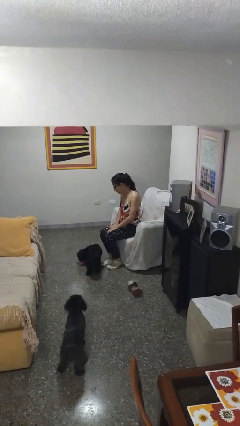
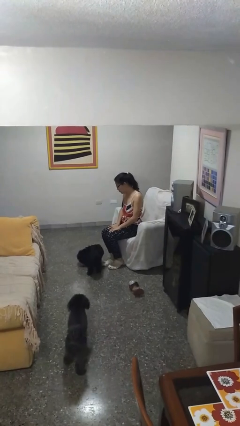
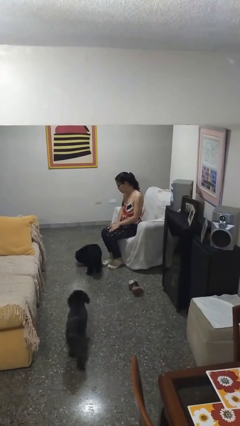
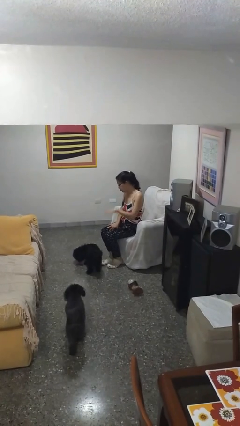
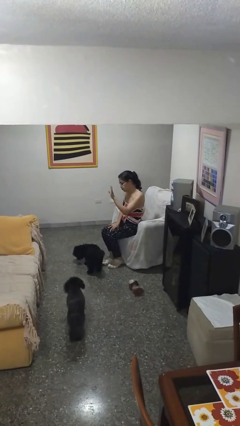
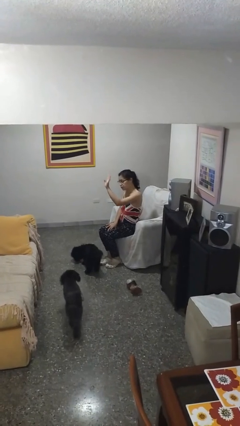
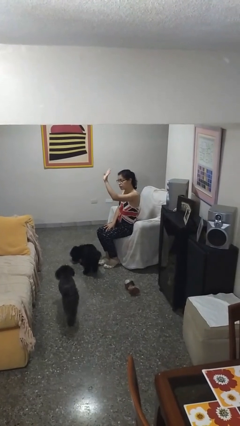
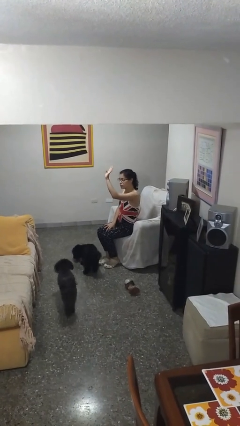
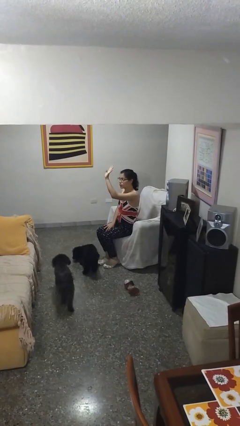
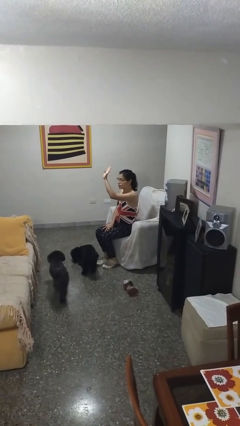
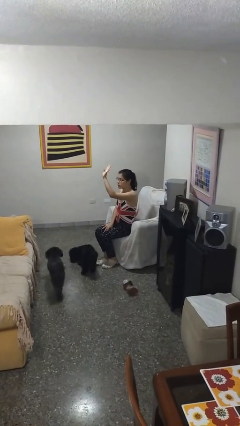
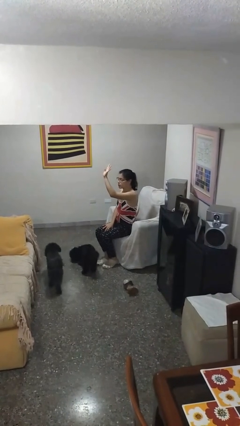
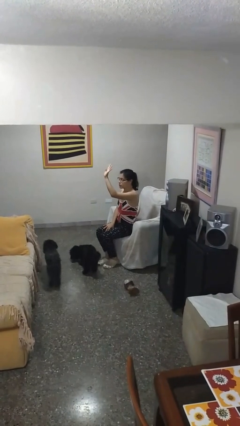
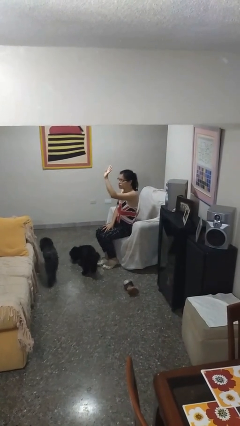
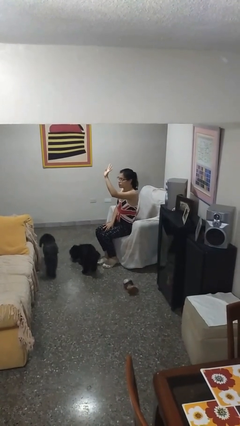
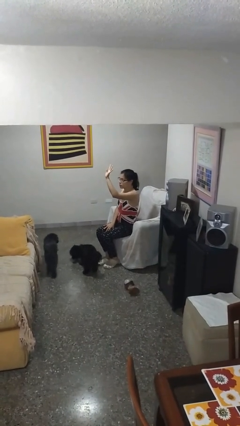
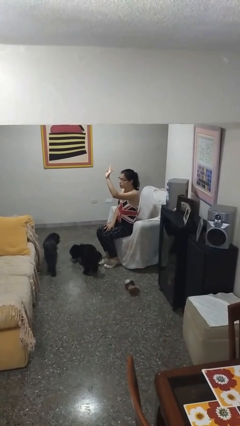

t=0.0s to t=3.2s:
person gestures raise hand

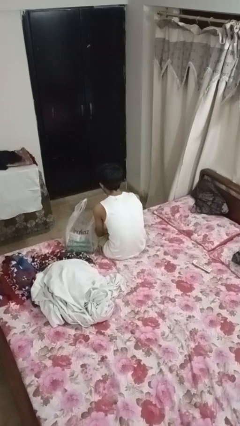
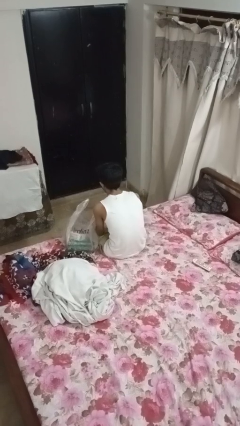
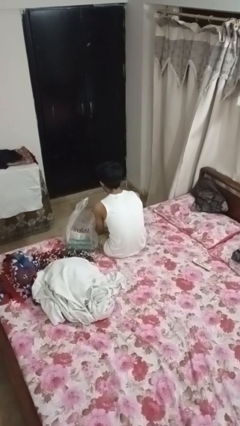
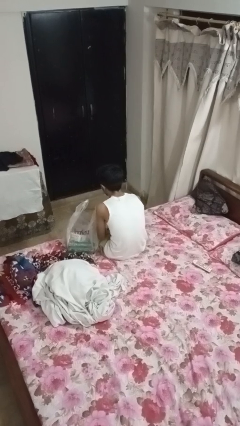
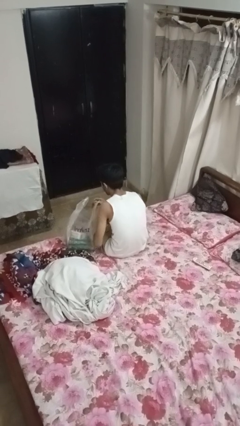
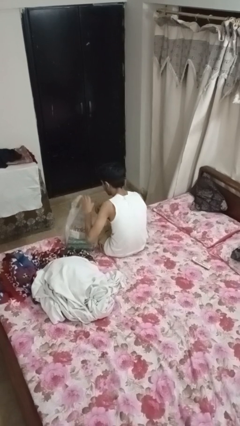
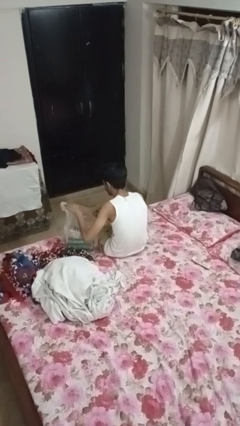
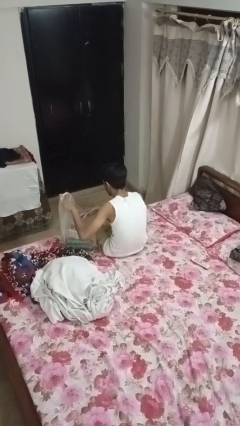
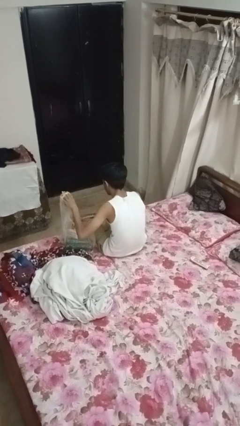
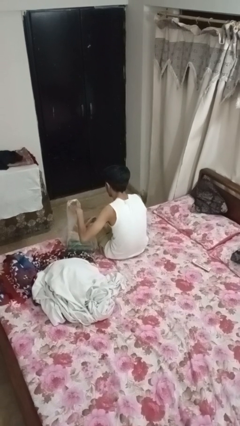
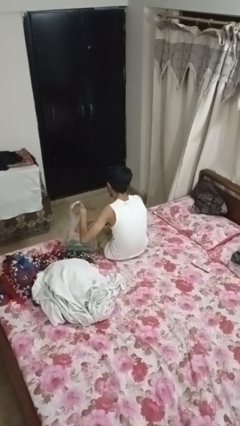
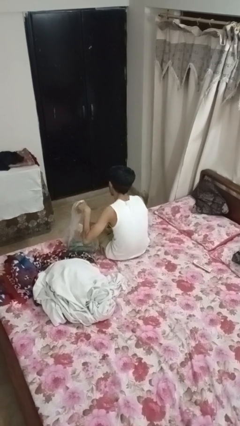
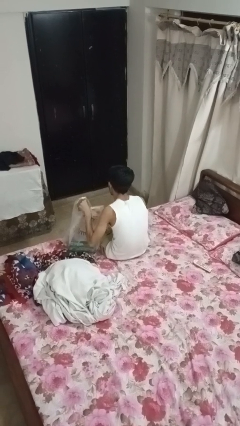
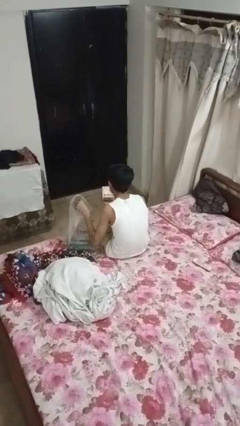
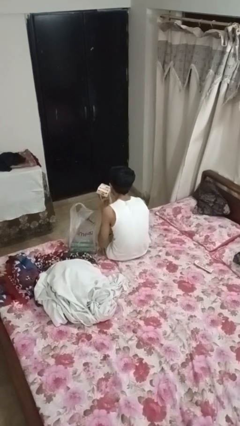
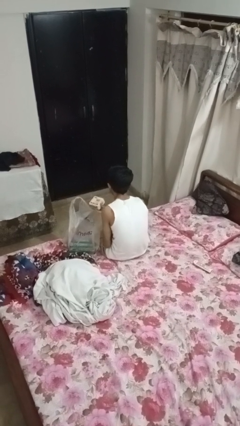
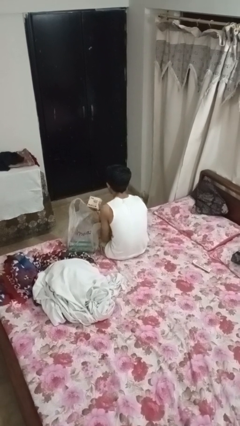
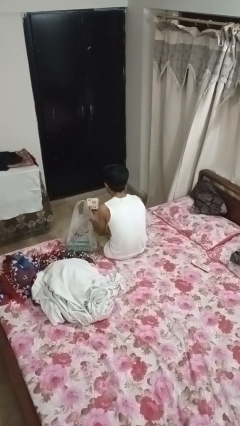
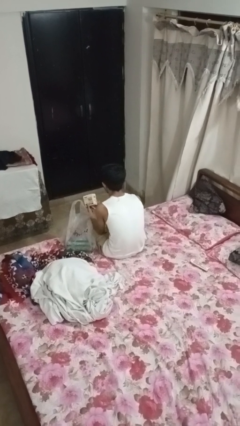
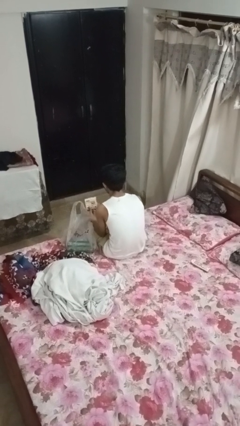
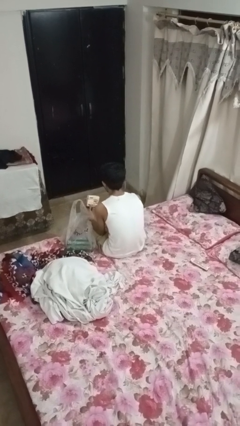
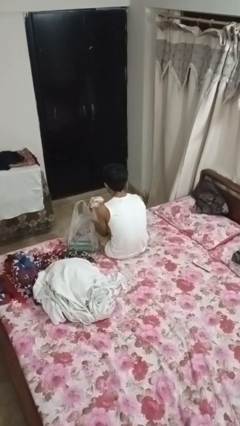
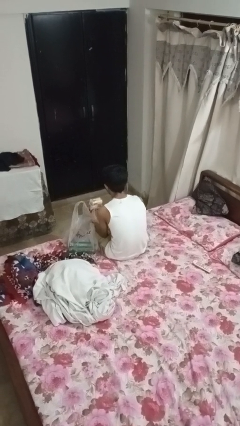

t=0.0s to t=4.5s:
person takes object from bag

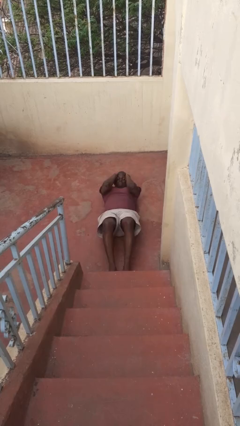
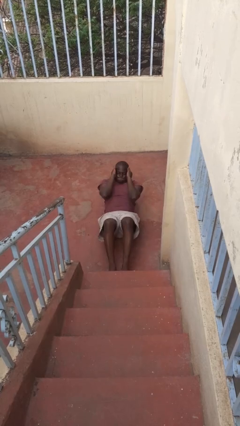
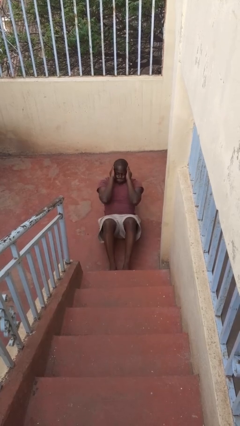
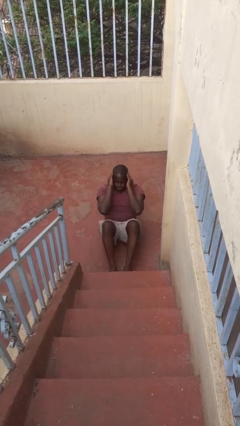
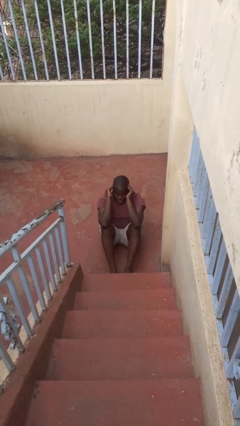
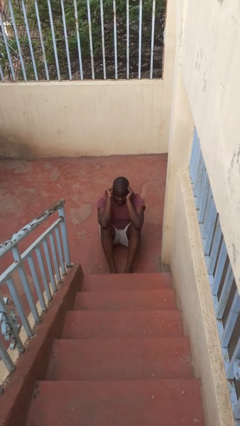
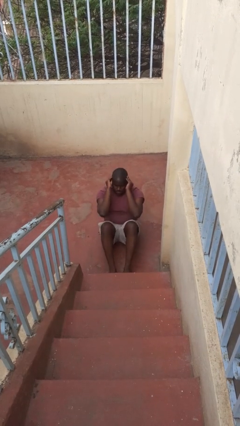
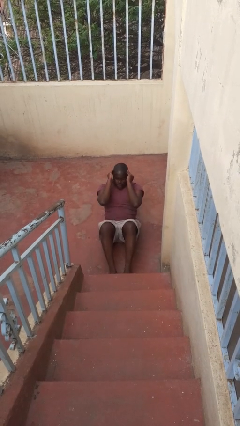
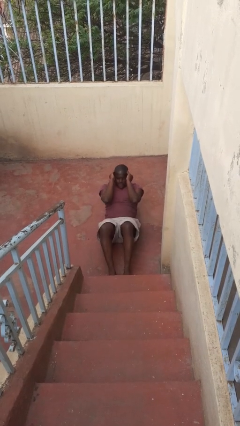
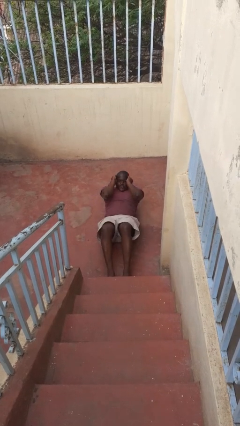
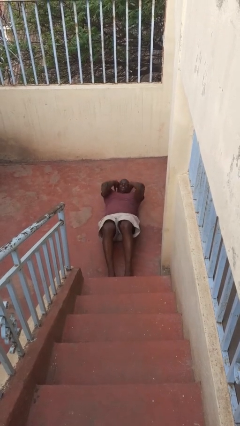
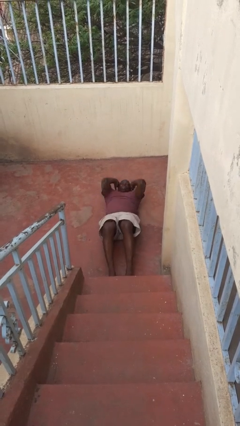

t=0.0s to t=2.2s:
person exercises with situp

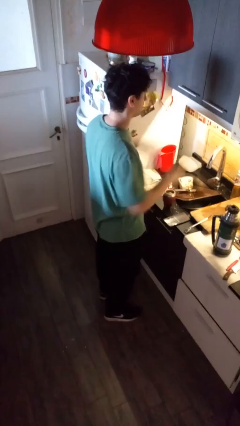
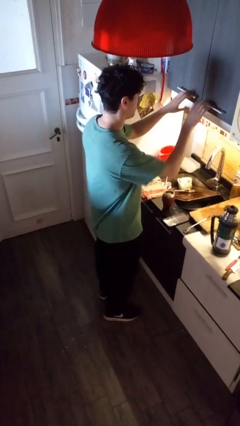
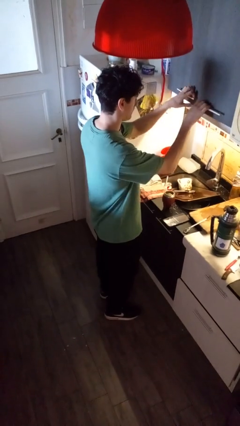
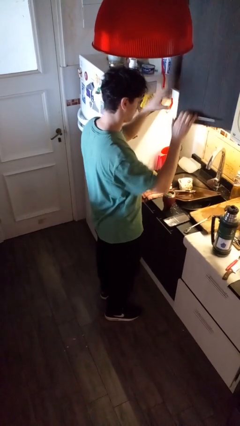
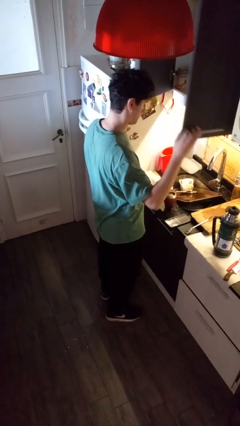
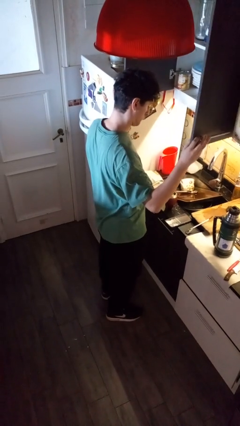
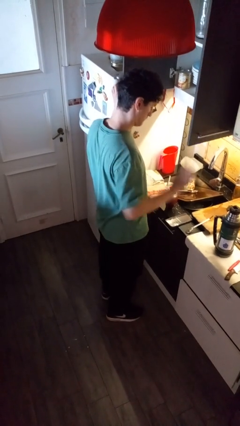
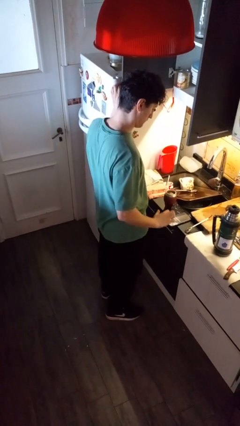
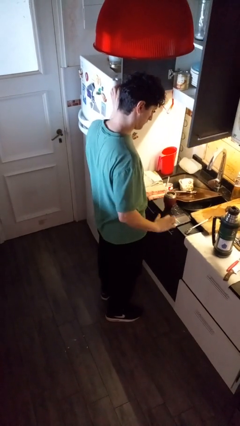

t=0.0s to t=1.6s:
person opens kitchen drawer

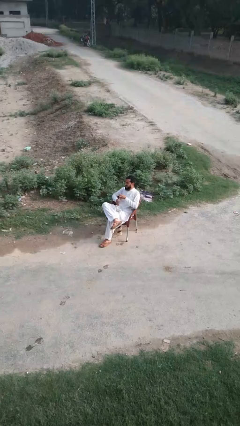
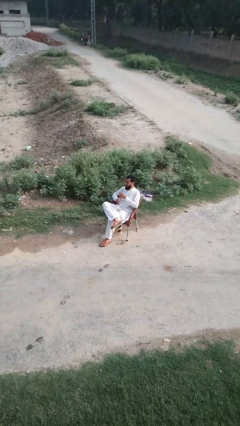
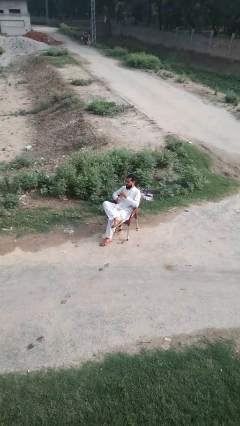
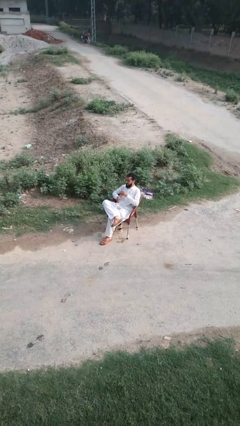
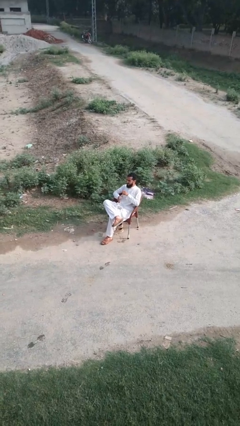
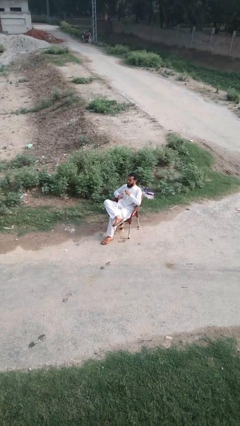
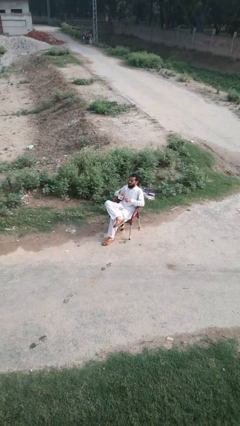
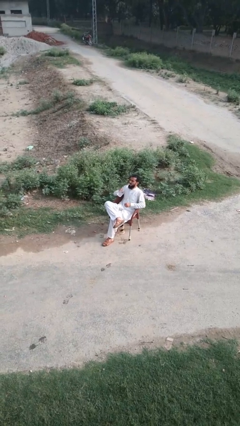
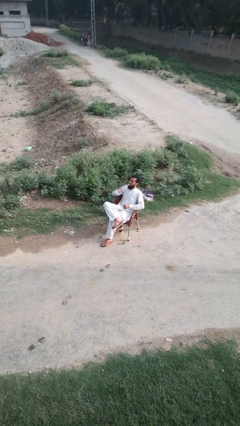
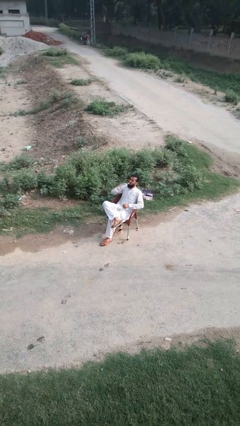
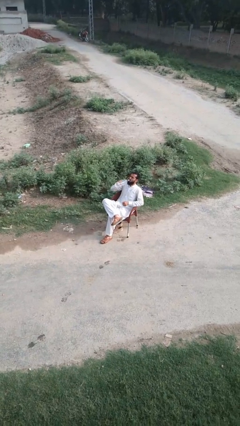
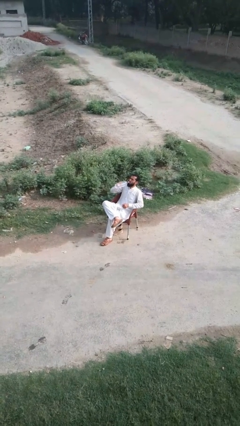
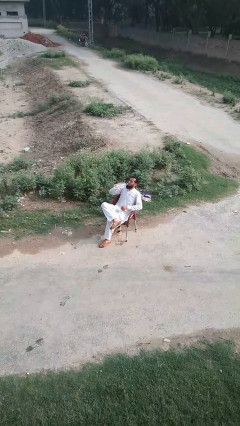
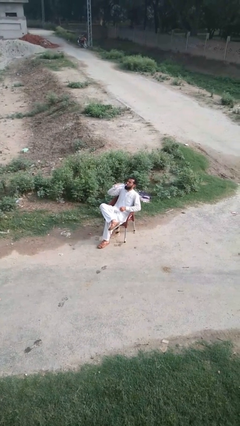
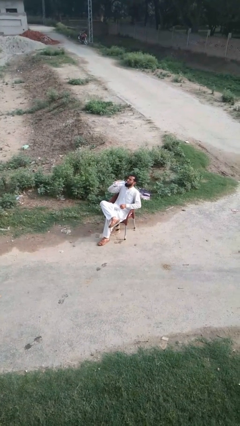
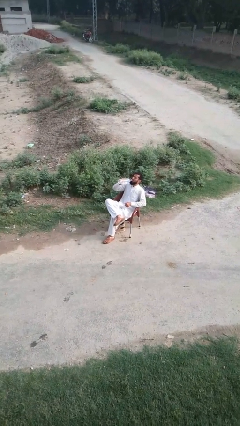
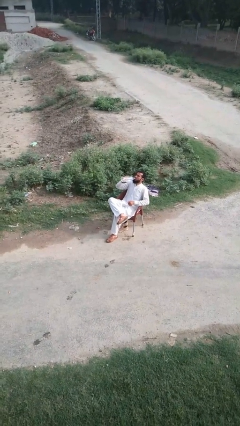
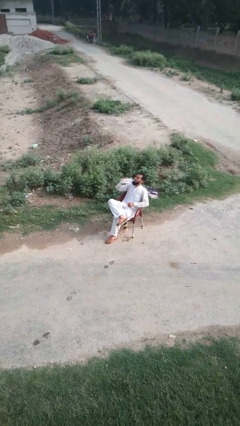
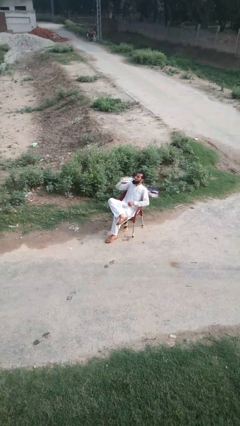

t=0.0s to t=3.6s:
person drinks from bottle

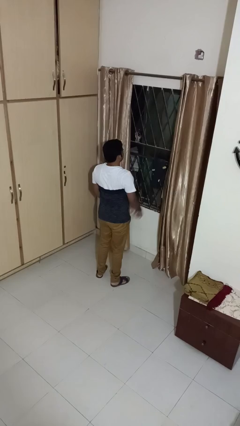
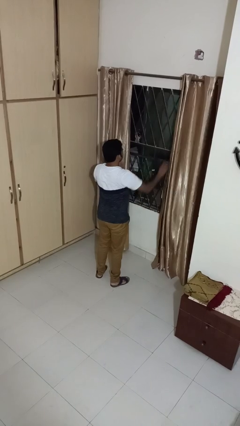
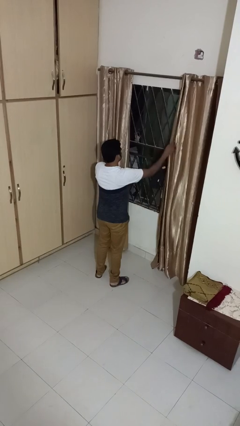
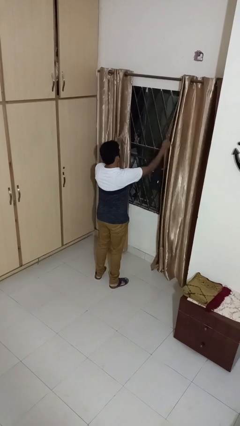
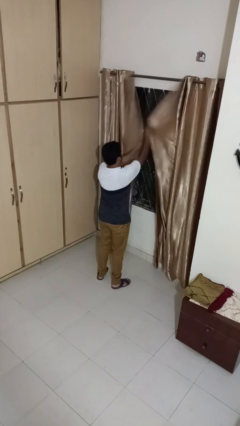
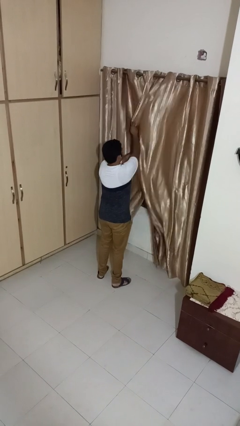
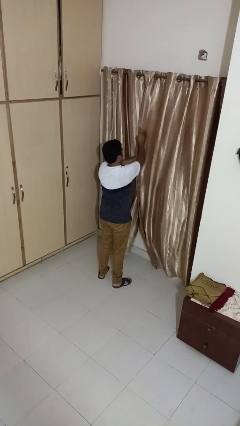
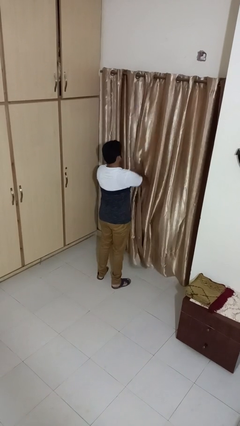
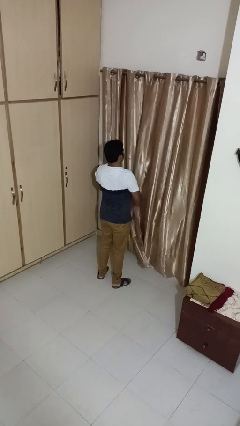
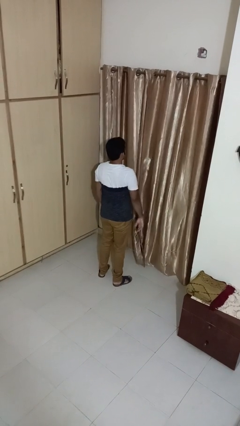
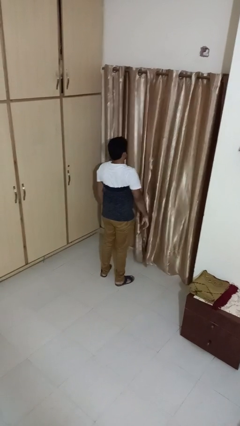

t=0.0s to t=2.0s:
person closes curtains

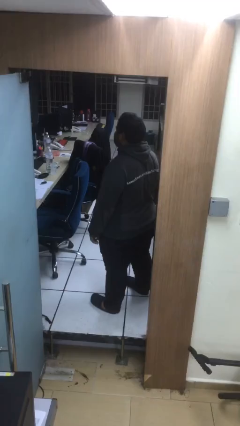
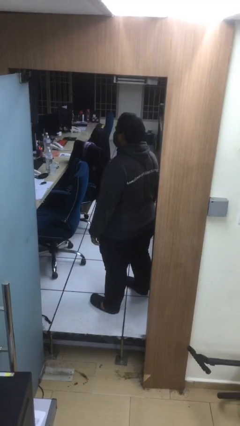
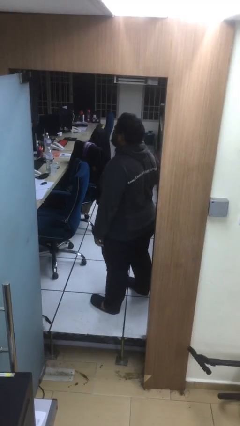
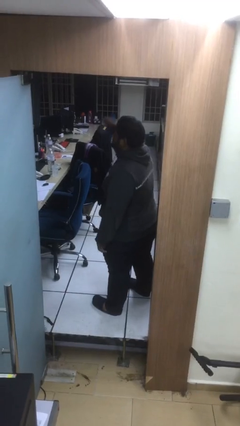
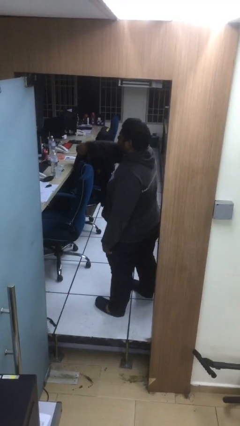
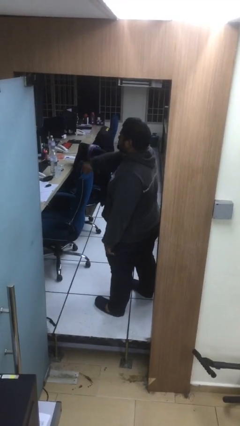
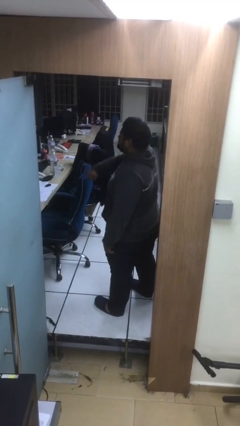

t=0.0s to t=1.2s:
person punches
